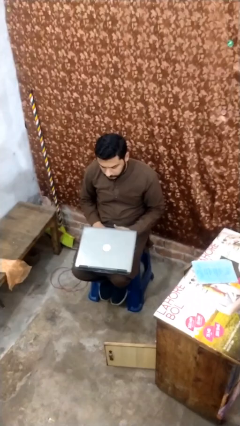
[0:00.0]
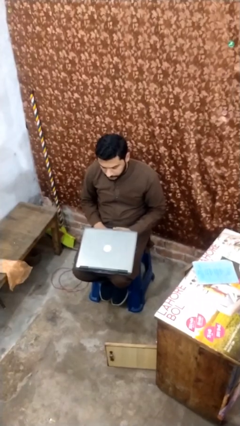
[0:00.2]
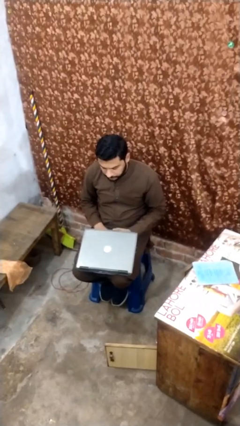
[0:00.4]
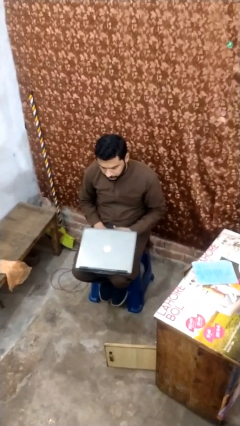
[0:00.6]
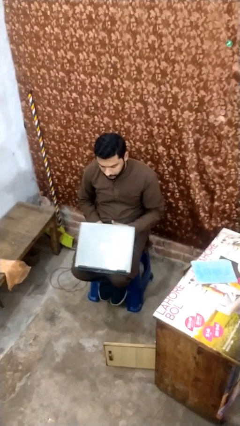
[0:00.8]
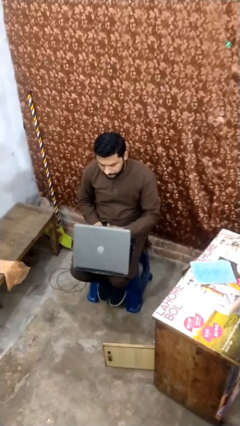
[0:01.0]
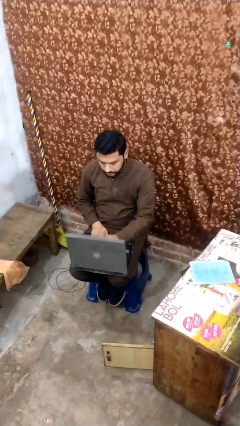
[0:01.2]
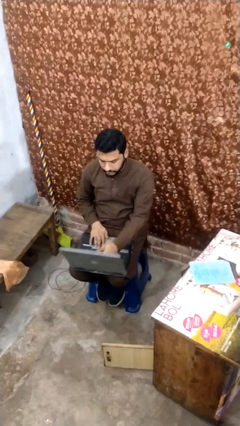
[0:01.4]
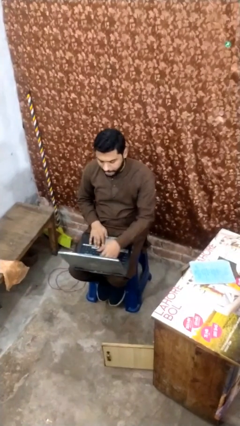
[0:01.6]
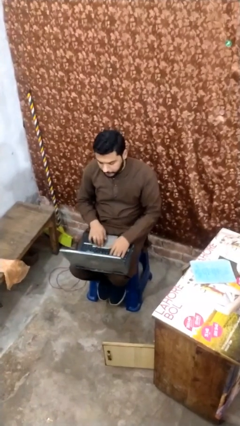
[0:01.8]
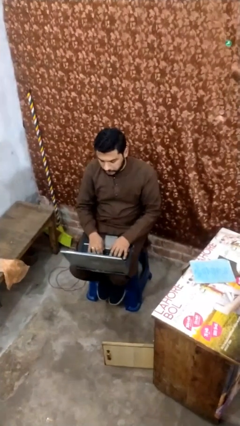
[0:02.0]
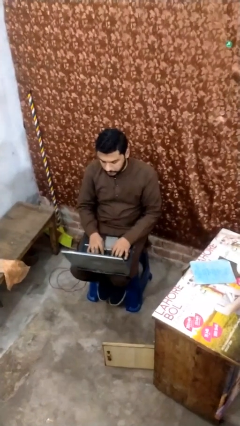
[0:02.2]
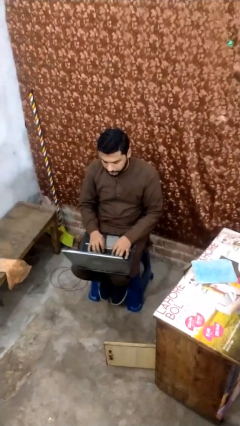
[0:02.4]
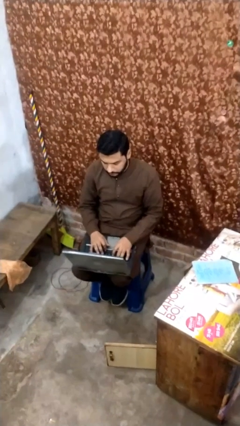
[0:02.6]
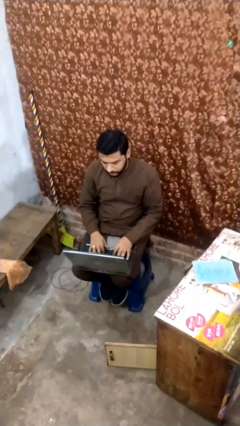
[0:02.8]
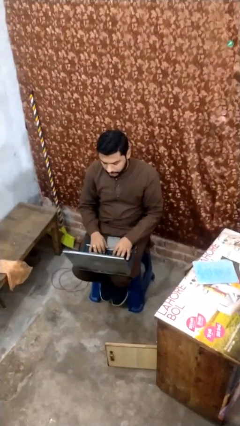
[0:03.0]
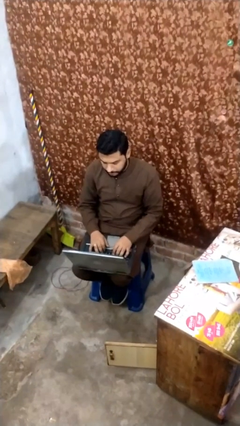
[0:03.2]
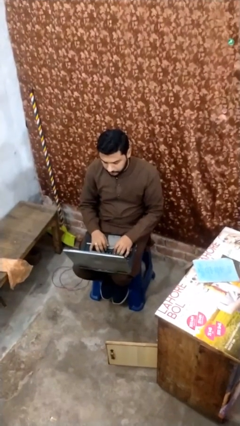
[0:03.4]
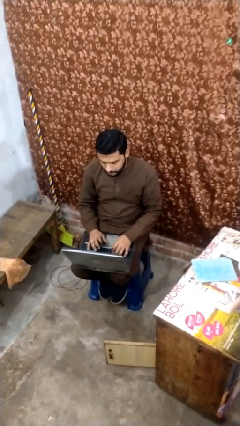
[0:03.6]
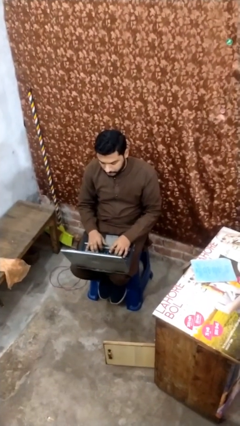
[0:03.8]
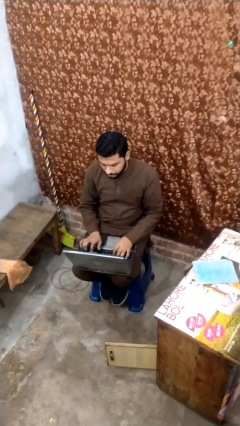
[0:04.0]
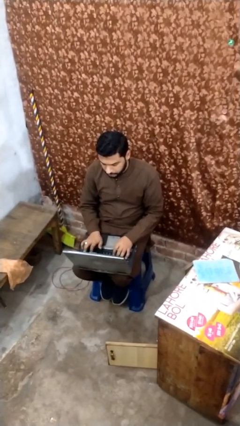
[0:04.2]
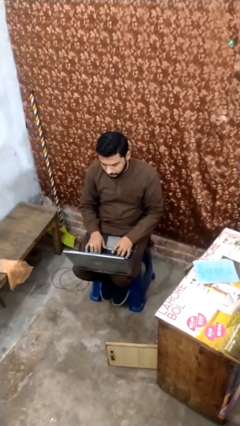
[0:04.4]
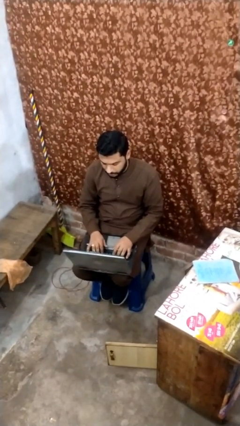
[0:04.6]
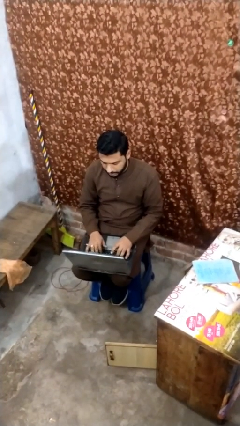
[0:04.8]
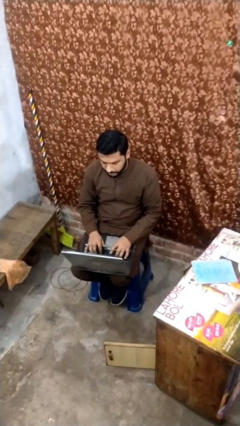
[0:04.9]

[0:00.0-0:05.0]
person interacts with laptop

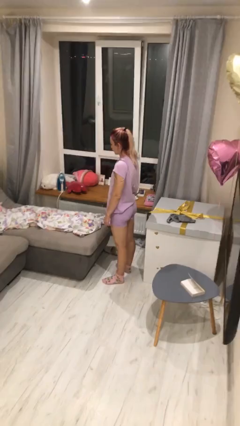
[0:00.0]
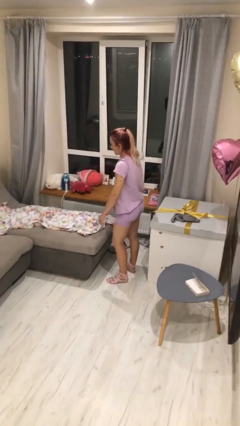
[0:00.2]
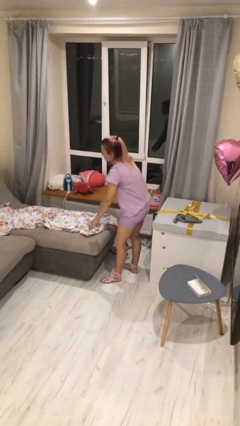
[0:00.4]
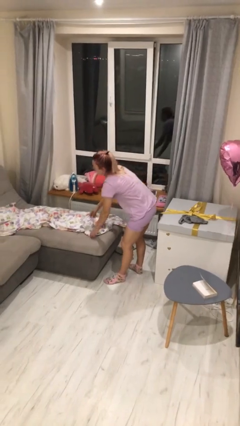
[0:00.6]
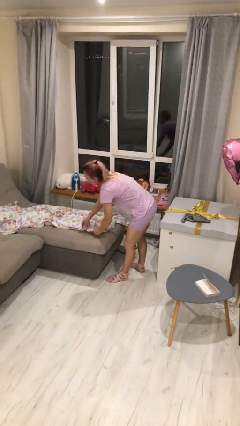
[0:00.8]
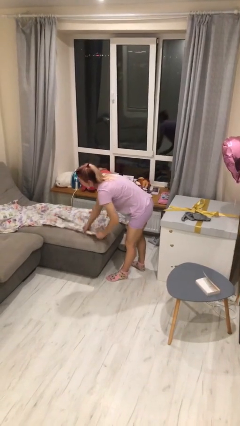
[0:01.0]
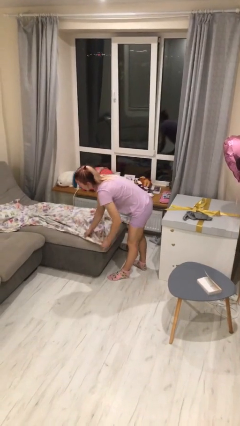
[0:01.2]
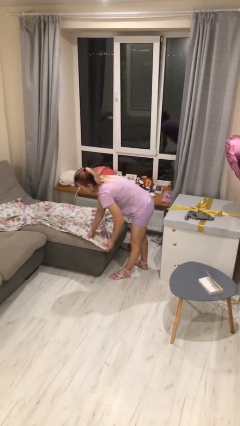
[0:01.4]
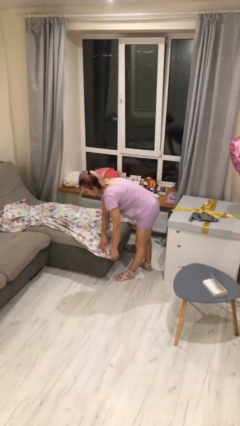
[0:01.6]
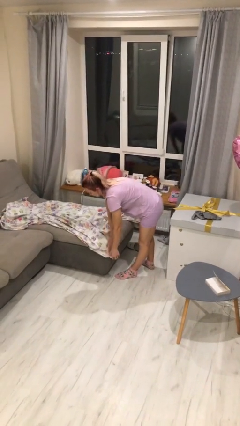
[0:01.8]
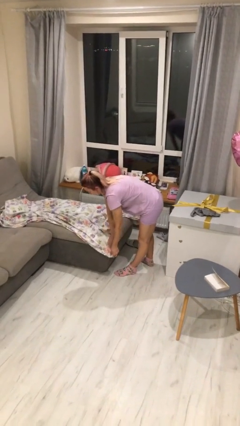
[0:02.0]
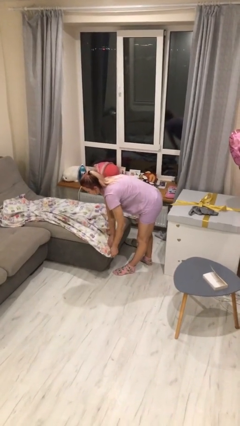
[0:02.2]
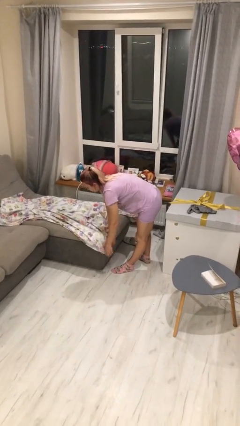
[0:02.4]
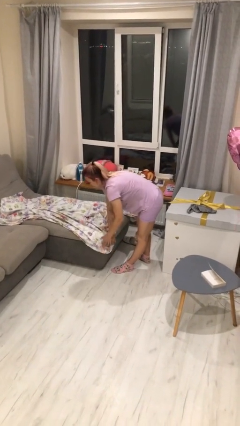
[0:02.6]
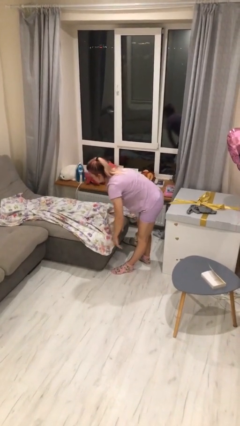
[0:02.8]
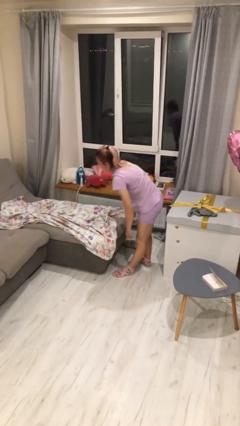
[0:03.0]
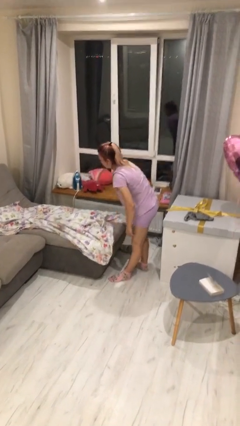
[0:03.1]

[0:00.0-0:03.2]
person makes bed

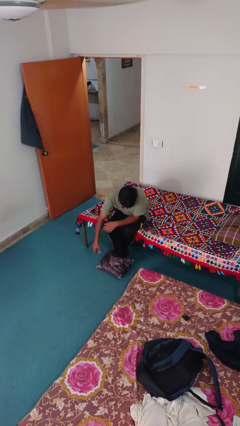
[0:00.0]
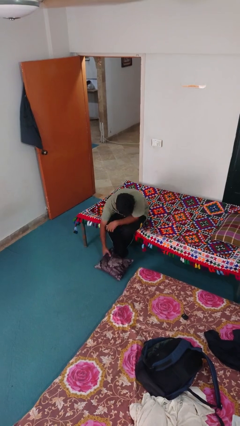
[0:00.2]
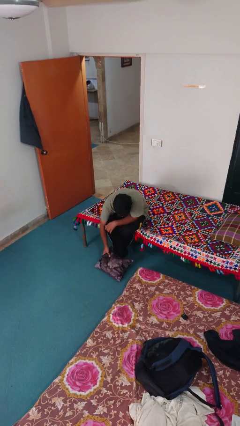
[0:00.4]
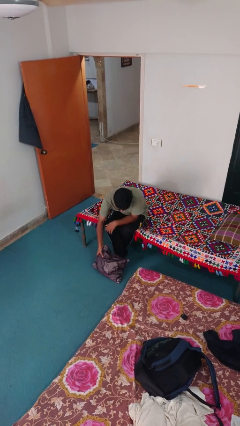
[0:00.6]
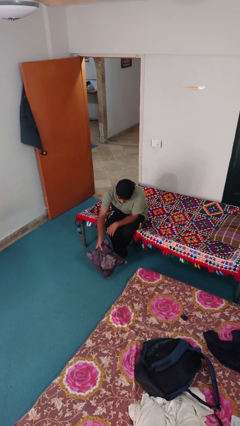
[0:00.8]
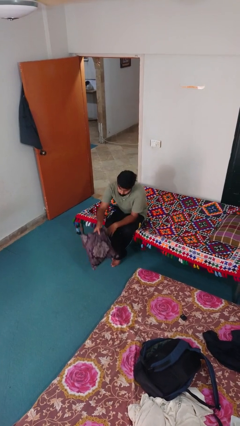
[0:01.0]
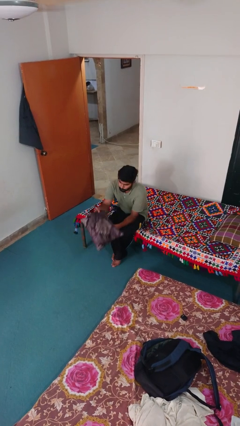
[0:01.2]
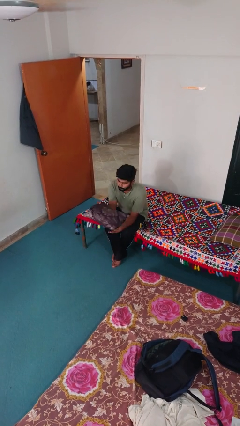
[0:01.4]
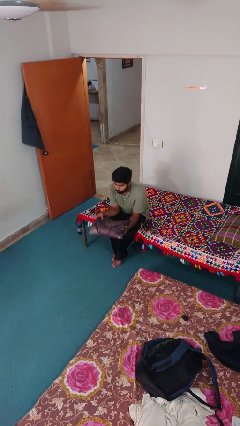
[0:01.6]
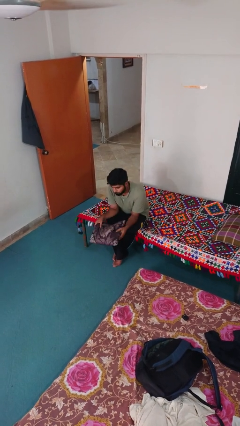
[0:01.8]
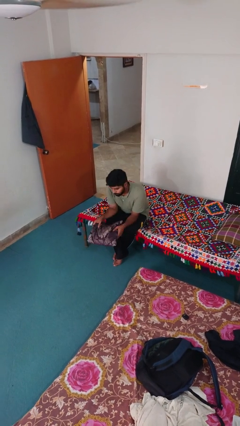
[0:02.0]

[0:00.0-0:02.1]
person picks up object from floor

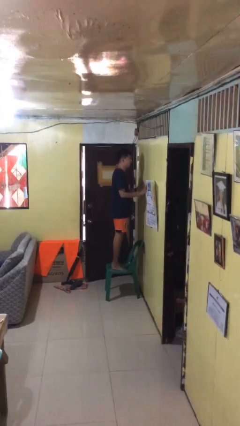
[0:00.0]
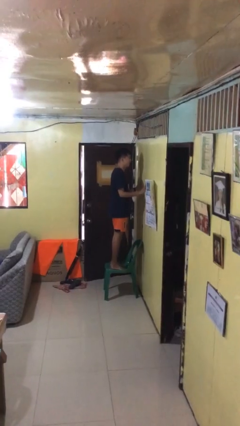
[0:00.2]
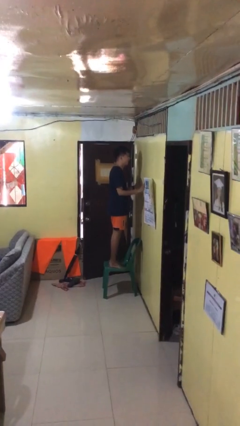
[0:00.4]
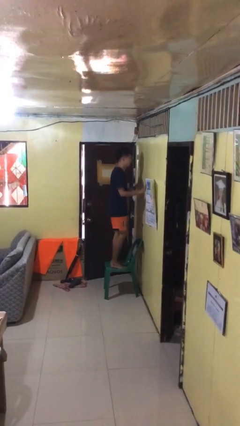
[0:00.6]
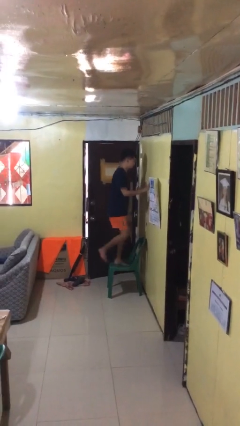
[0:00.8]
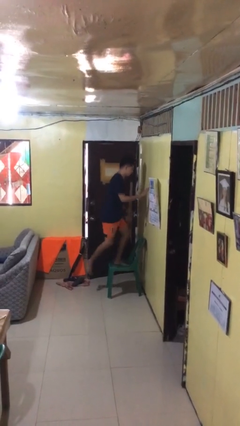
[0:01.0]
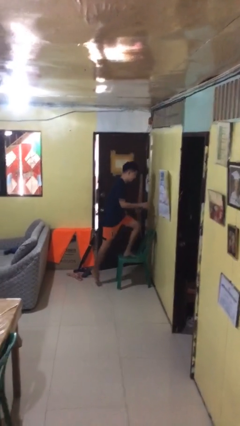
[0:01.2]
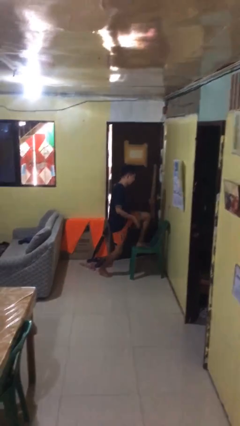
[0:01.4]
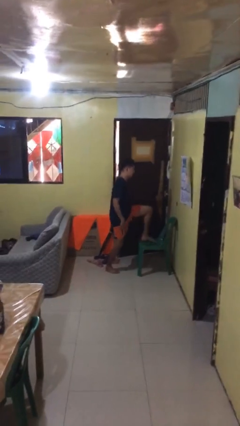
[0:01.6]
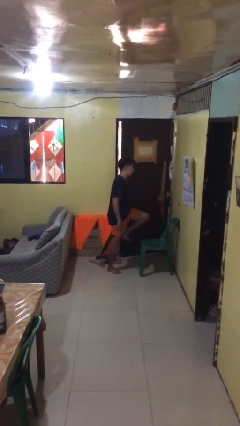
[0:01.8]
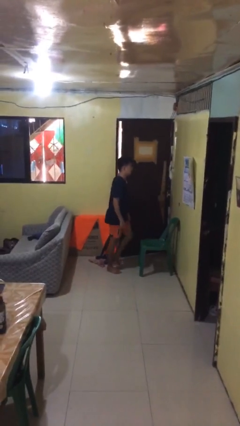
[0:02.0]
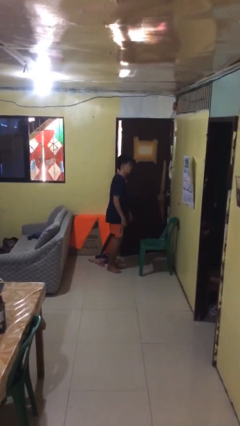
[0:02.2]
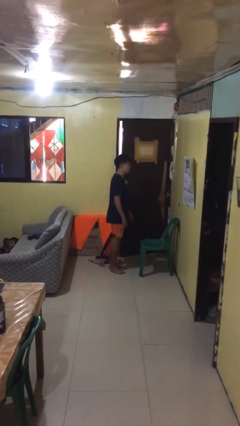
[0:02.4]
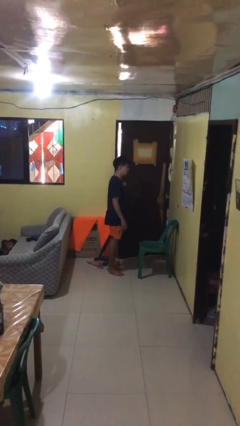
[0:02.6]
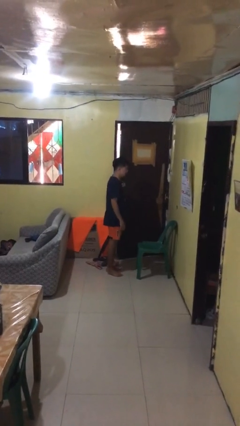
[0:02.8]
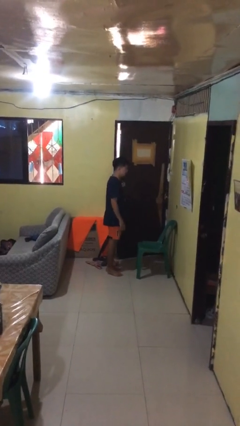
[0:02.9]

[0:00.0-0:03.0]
person climbs off chair

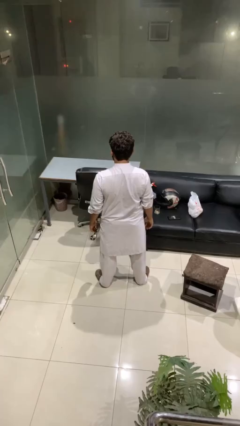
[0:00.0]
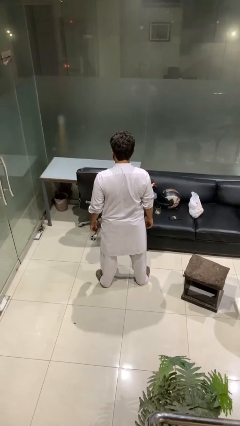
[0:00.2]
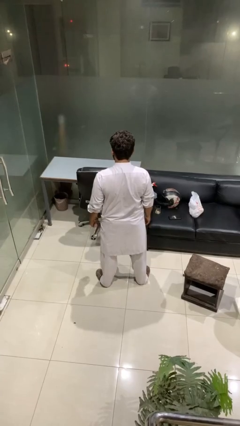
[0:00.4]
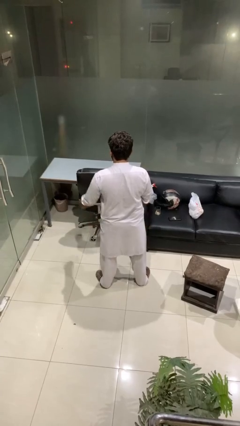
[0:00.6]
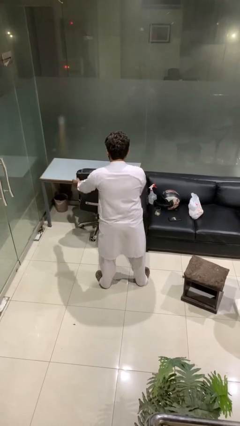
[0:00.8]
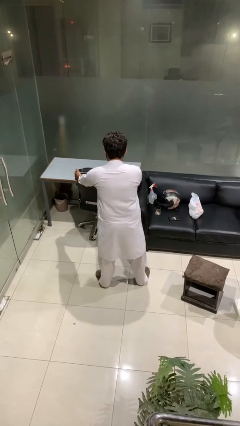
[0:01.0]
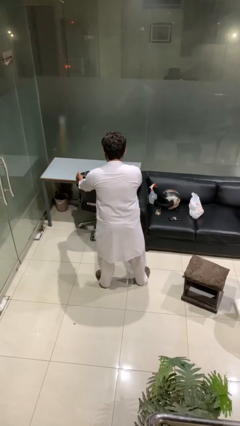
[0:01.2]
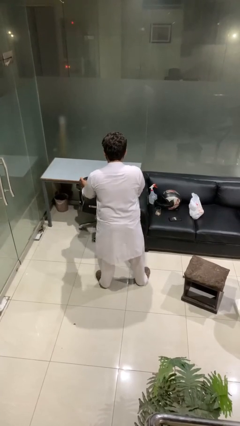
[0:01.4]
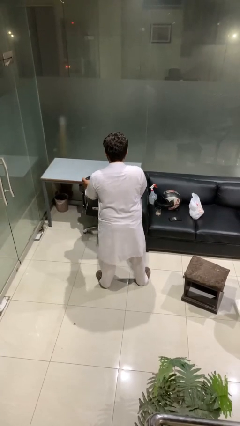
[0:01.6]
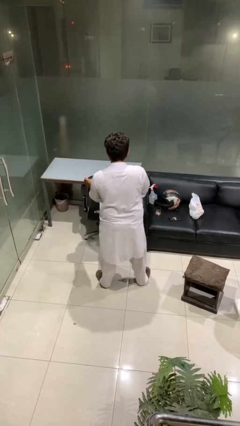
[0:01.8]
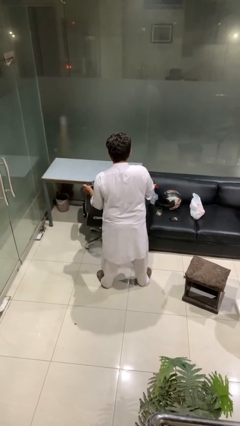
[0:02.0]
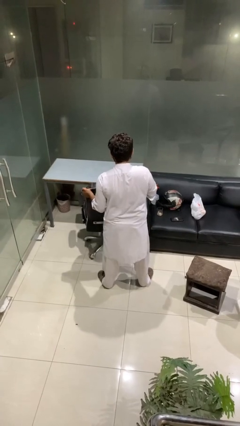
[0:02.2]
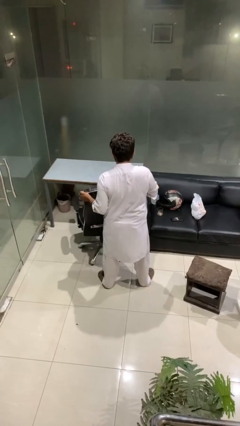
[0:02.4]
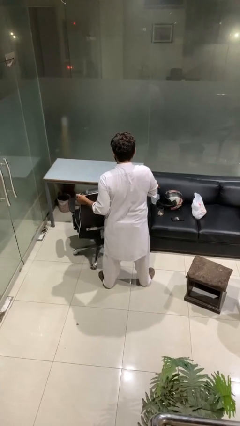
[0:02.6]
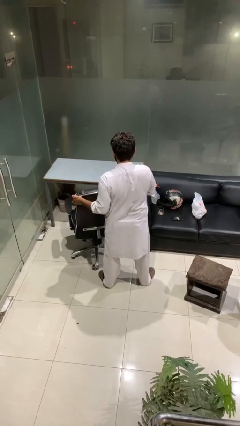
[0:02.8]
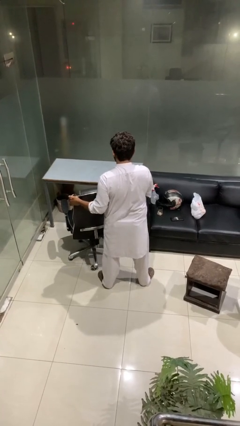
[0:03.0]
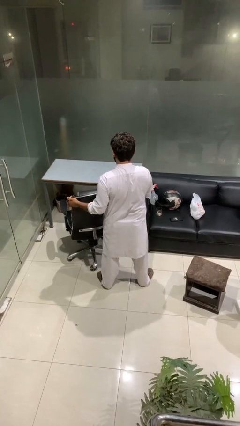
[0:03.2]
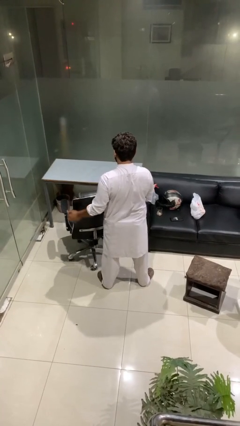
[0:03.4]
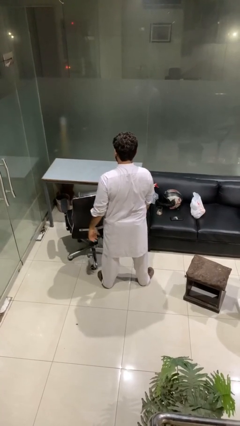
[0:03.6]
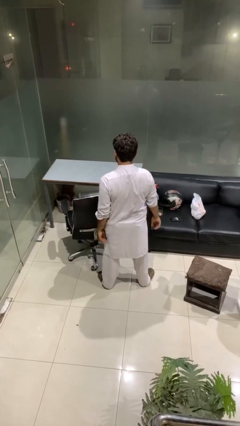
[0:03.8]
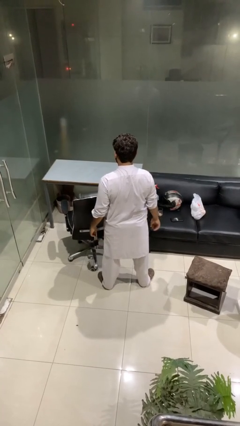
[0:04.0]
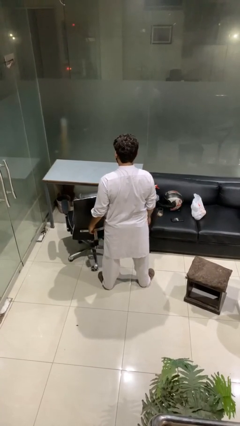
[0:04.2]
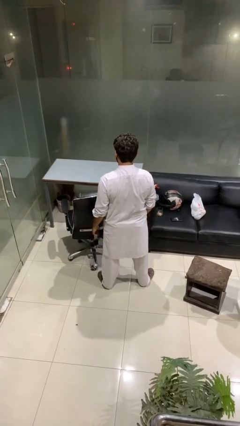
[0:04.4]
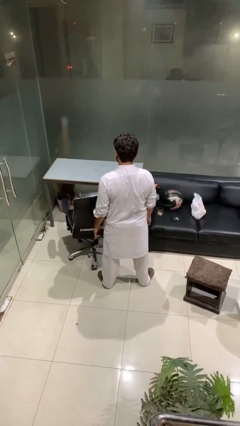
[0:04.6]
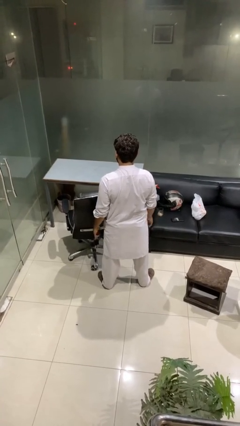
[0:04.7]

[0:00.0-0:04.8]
person pulls out chair
